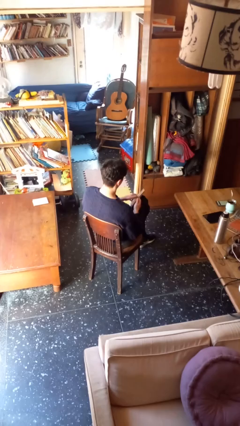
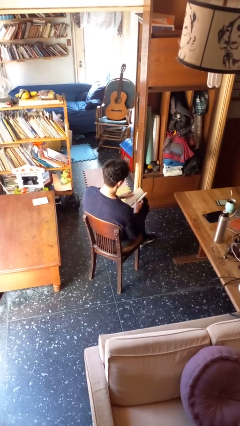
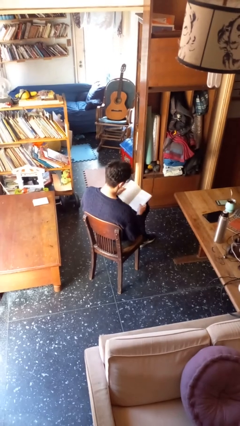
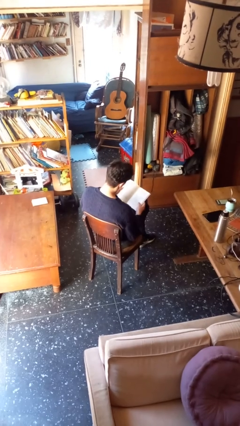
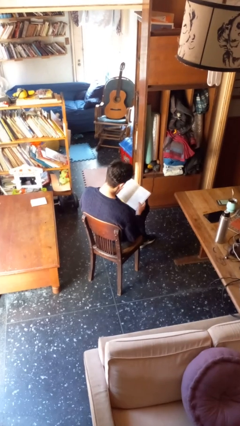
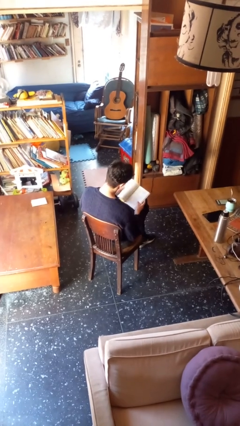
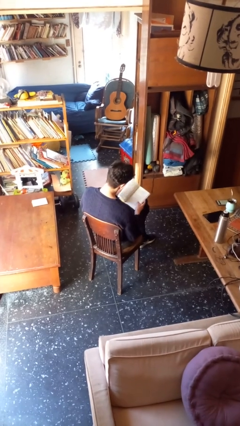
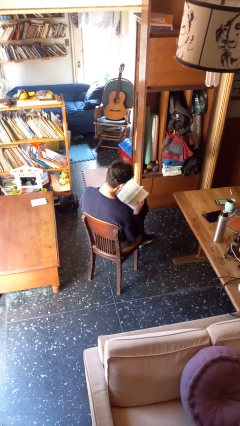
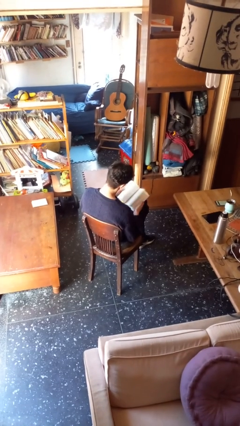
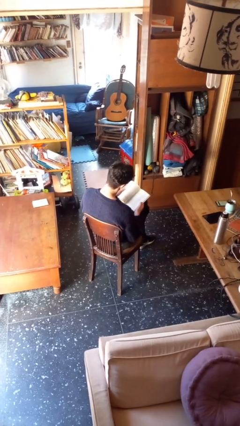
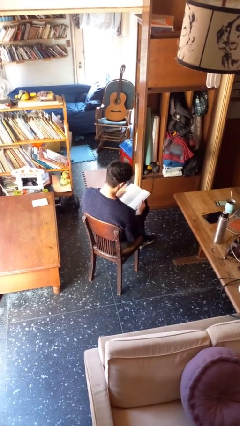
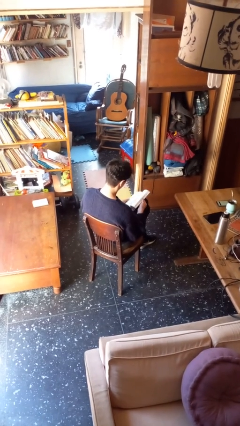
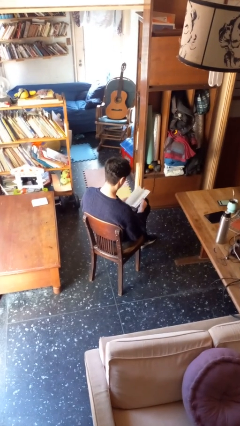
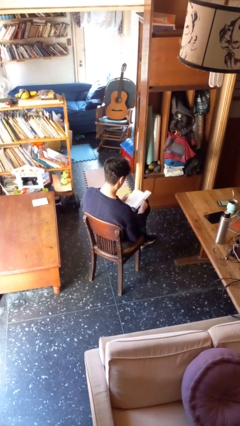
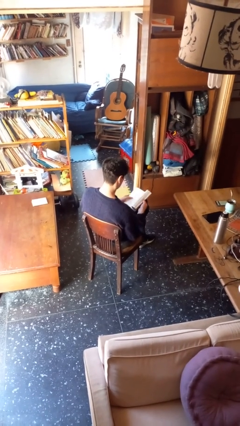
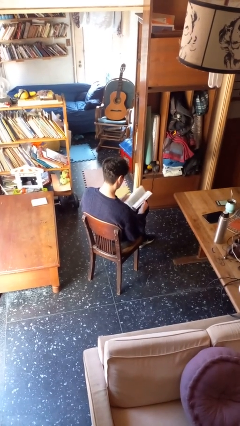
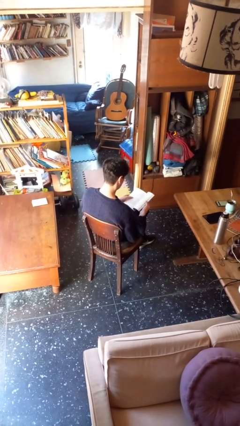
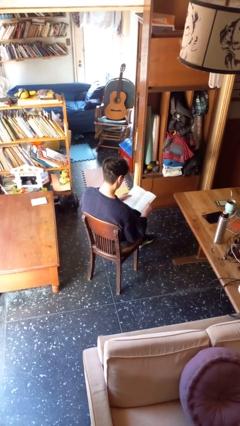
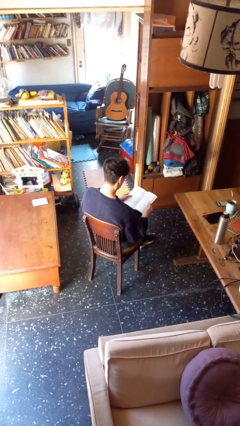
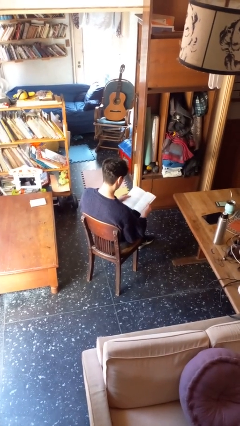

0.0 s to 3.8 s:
person reads book

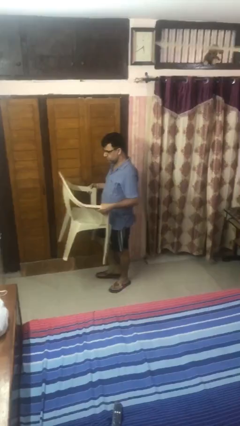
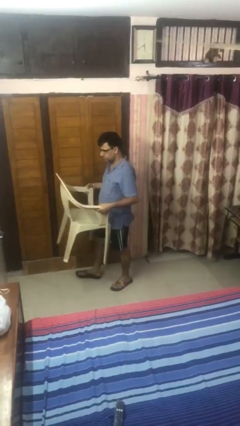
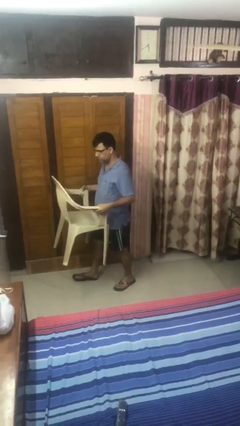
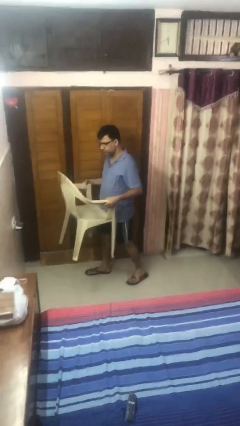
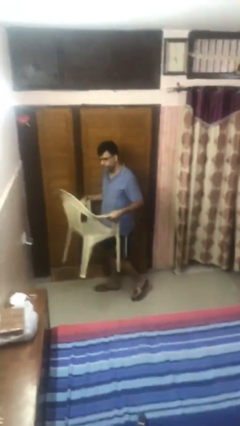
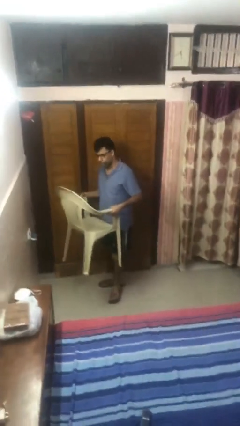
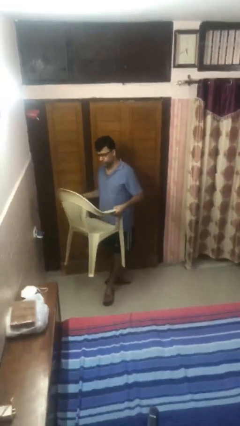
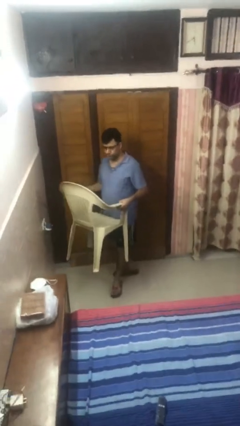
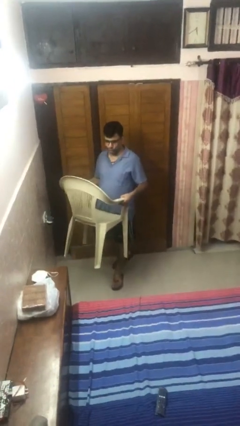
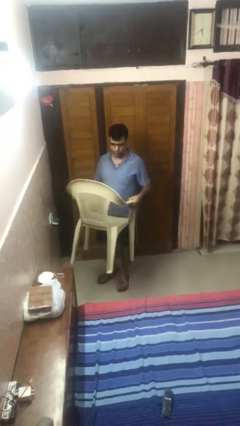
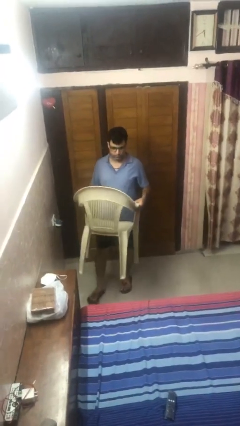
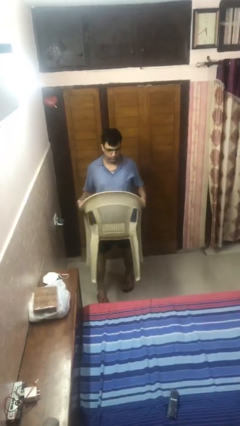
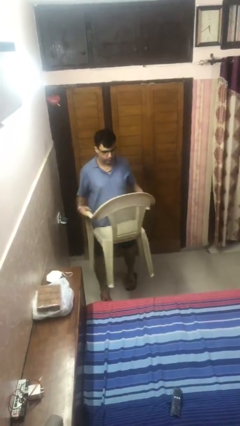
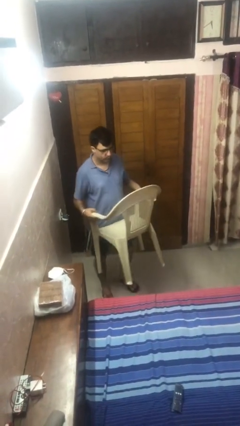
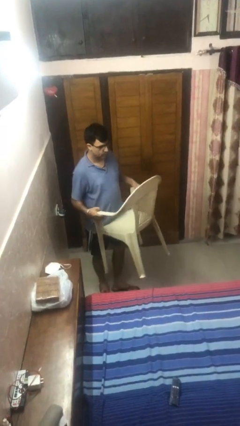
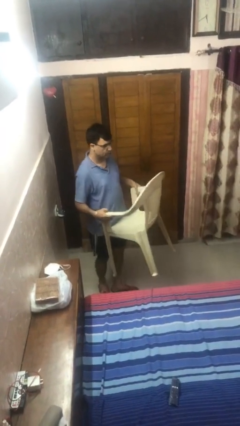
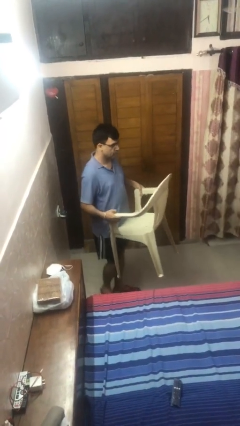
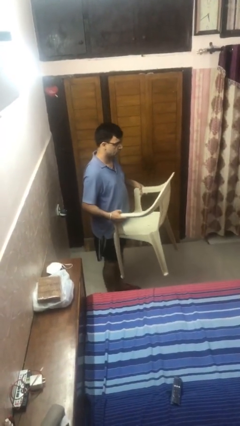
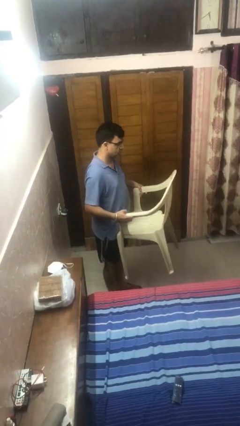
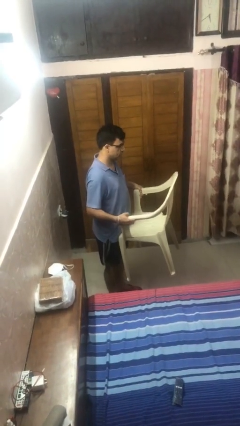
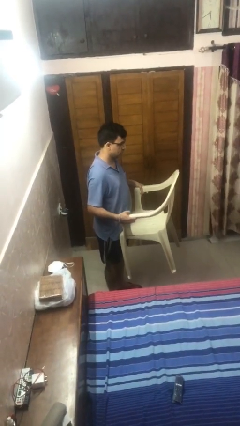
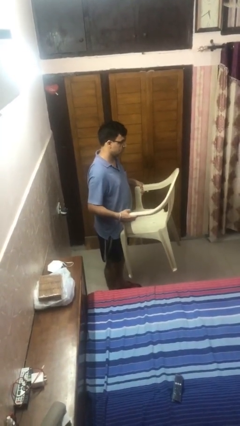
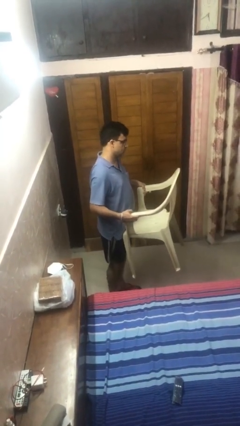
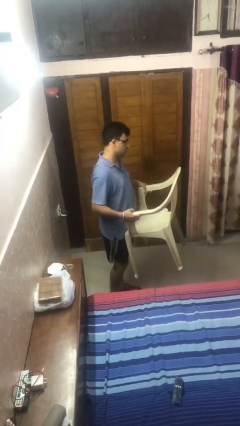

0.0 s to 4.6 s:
person carries furniture

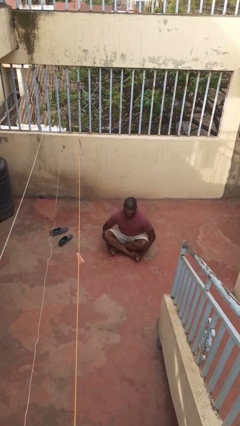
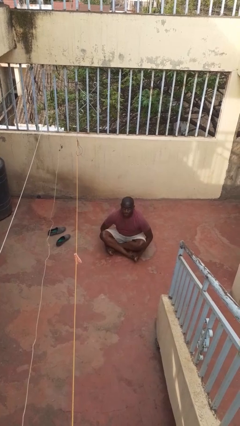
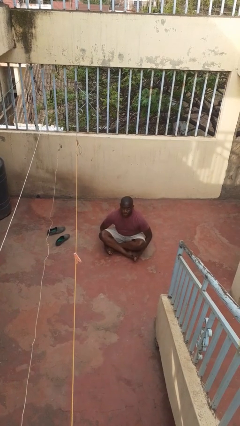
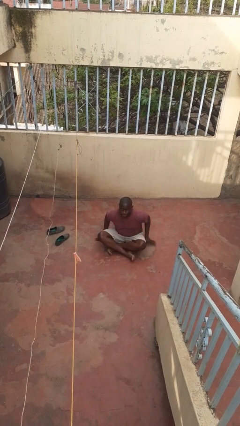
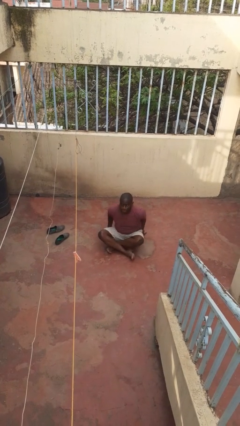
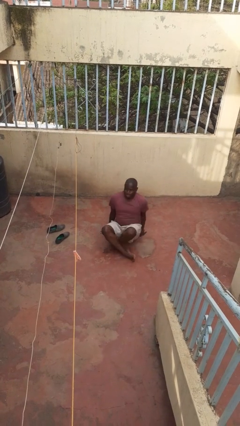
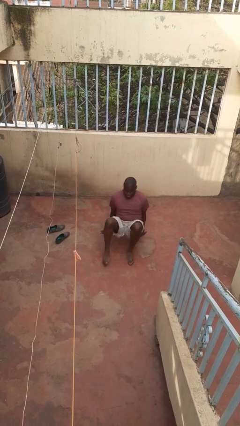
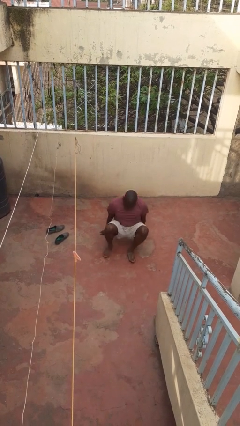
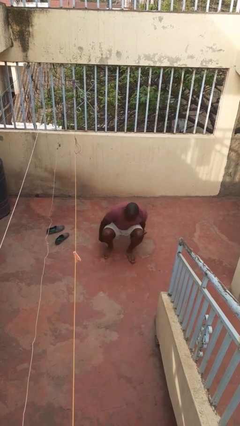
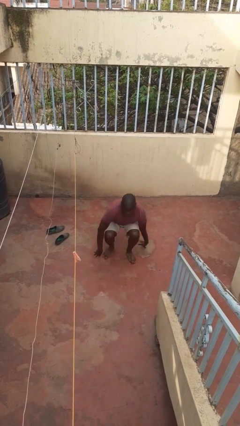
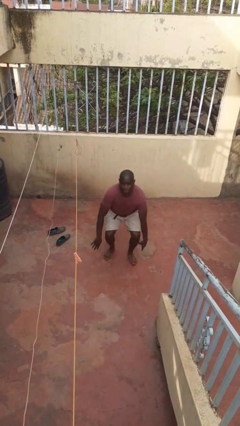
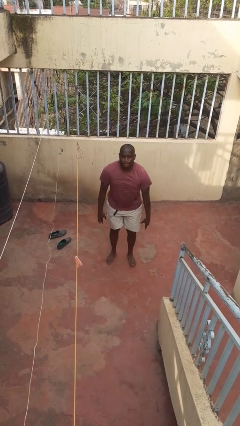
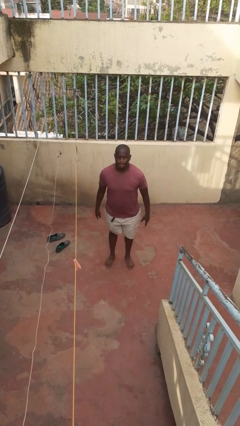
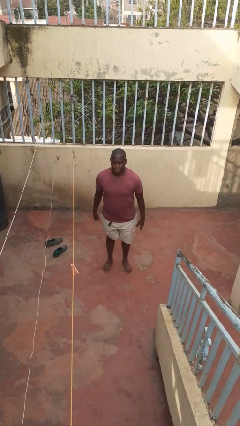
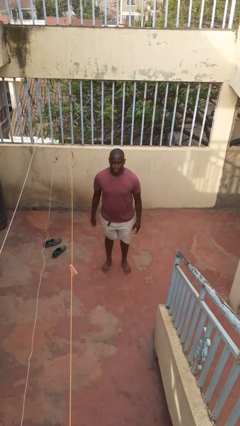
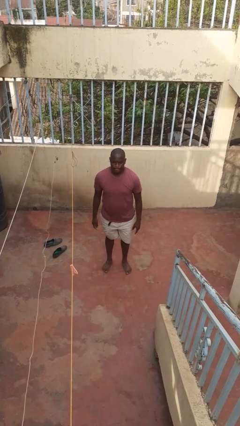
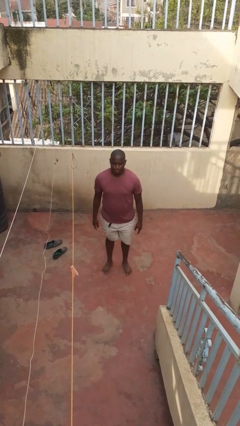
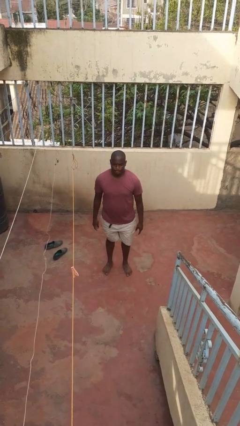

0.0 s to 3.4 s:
person stands up from floor

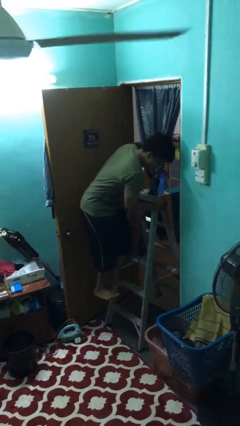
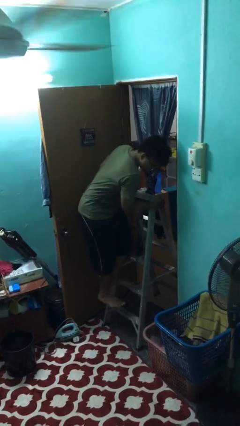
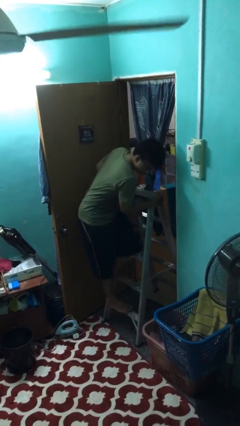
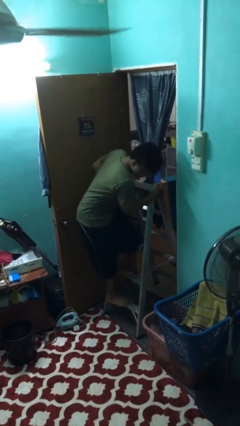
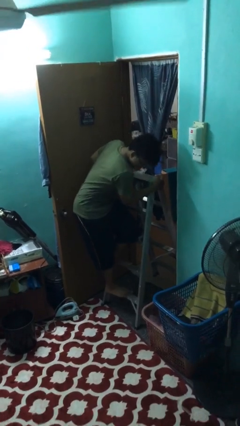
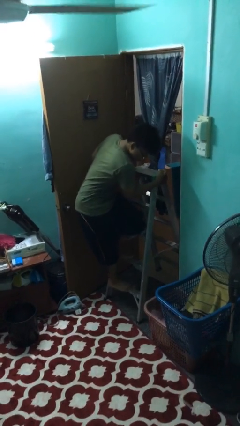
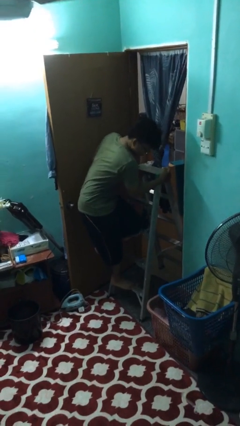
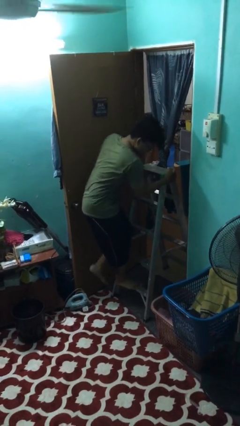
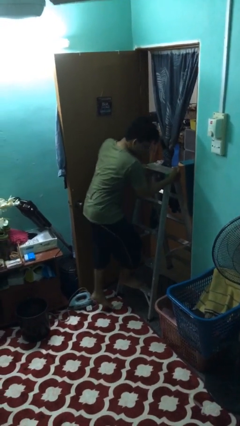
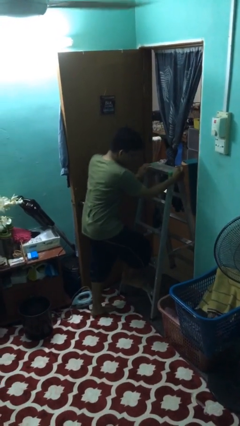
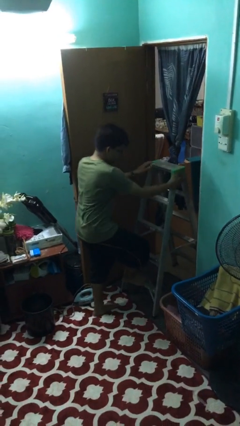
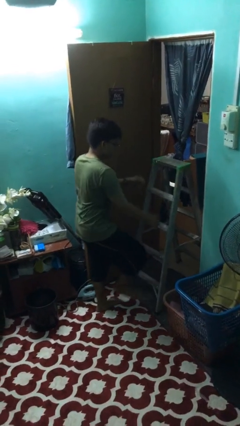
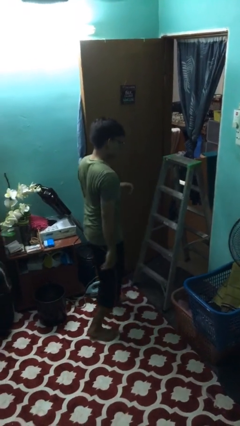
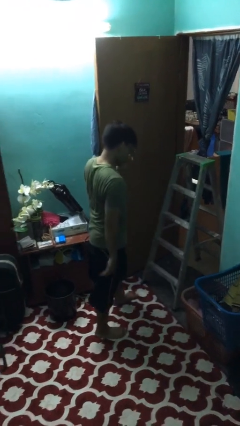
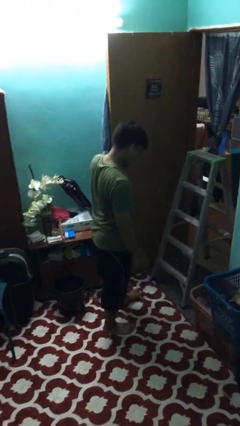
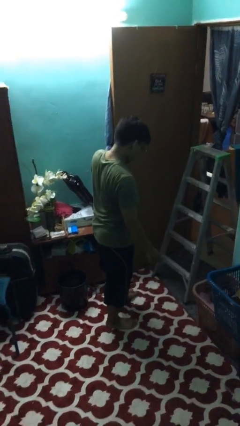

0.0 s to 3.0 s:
person climbs down ladder

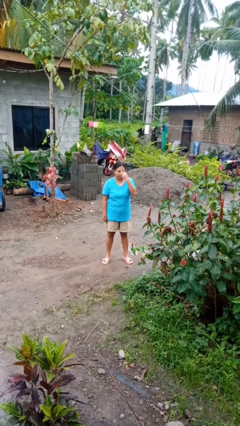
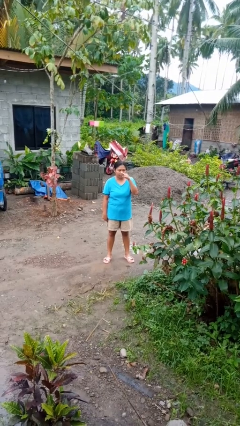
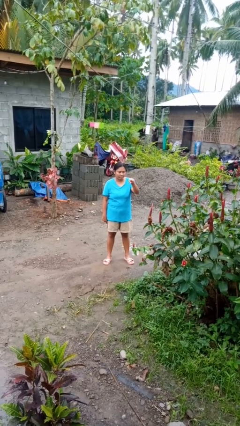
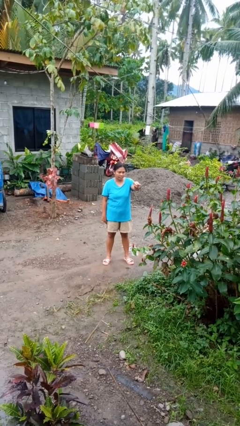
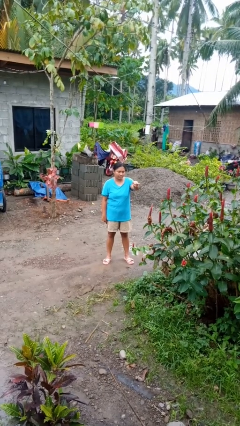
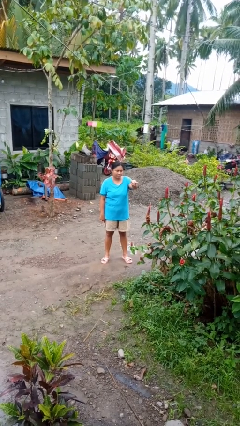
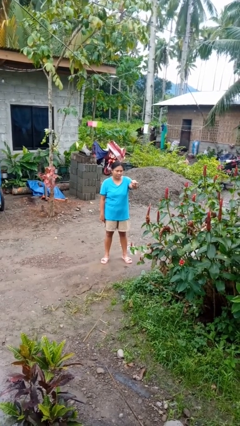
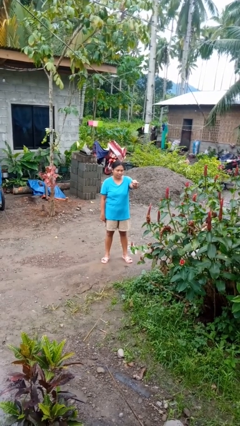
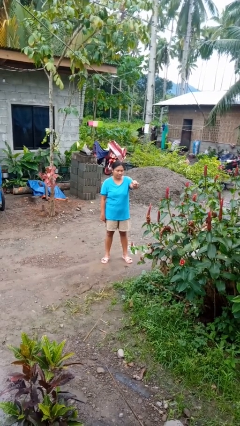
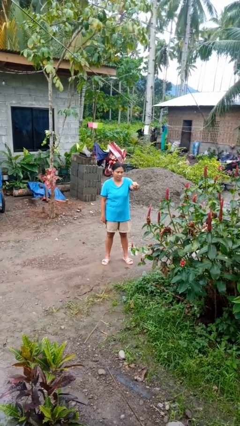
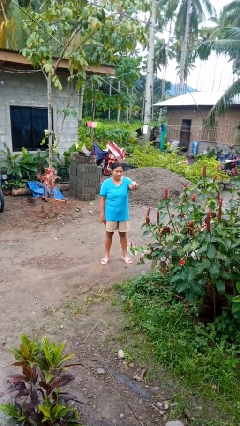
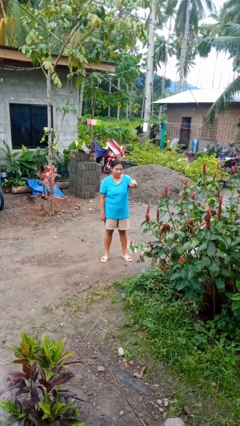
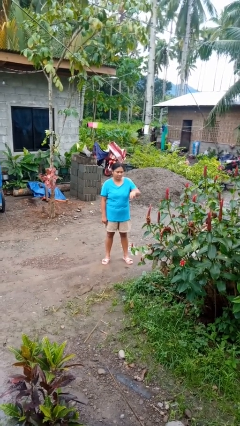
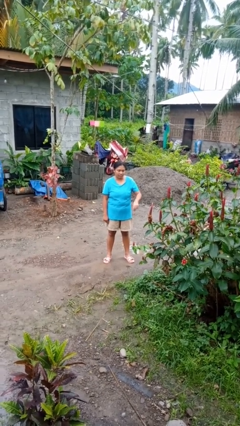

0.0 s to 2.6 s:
person gestures watch closely
